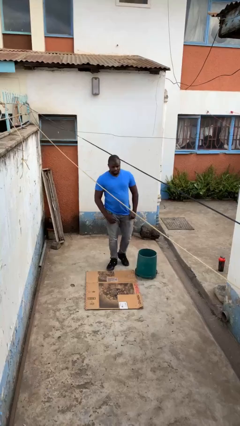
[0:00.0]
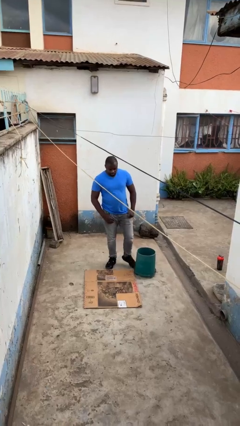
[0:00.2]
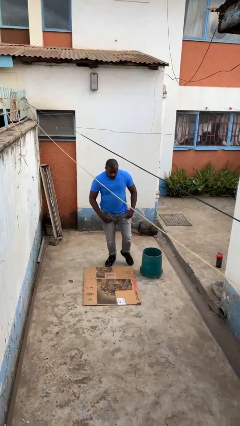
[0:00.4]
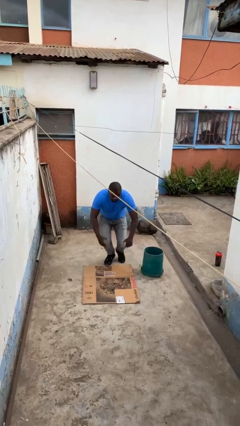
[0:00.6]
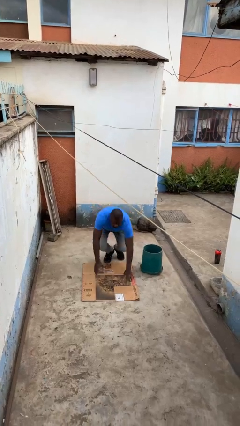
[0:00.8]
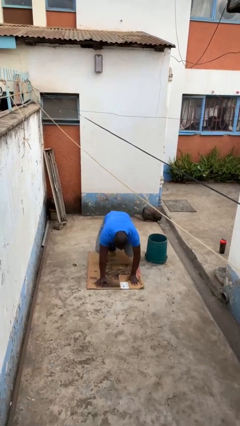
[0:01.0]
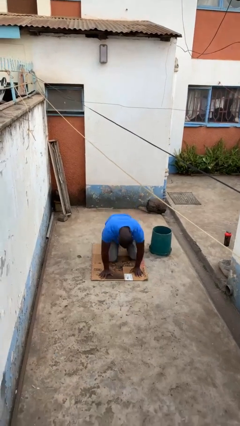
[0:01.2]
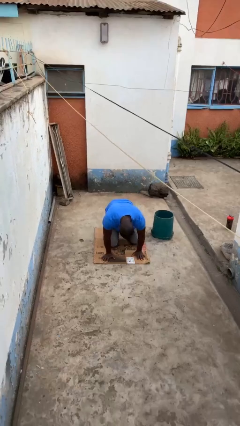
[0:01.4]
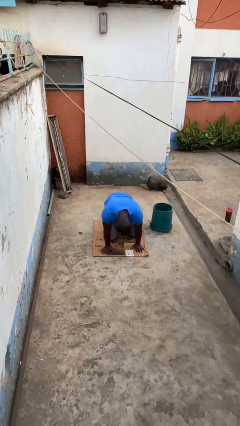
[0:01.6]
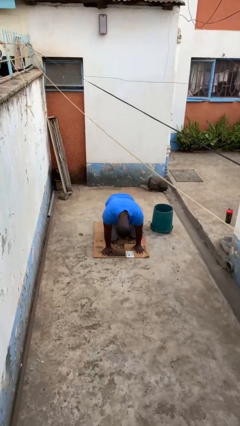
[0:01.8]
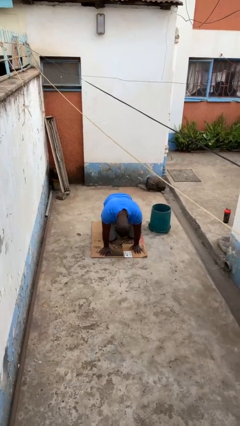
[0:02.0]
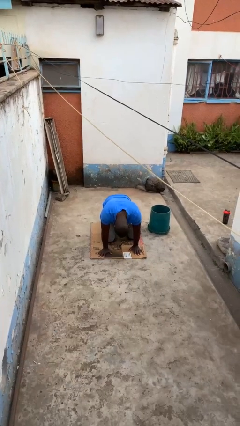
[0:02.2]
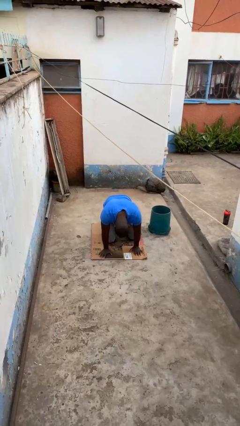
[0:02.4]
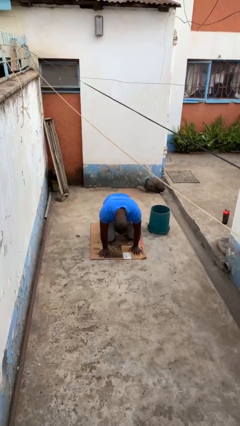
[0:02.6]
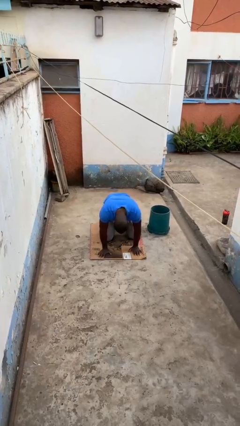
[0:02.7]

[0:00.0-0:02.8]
person trips on object on floor

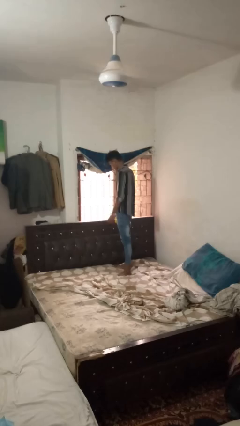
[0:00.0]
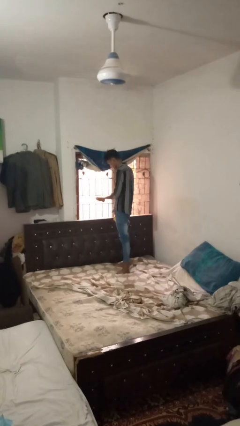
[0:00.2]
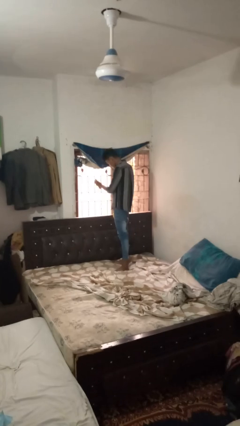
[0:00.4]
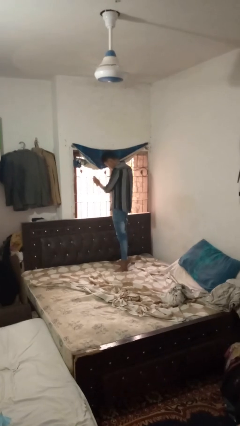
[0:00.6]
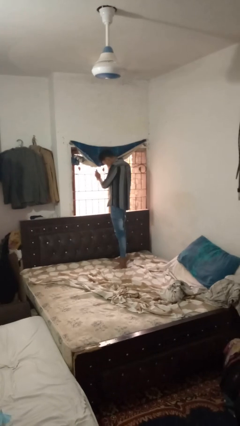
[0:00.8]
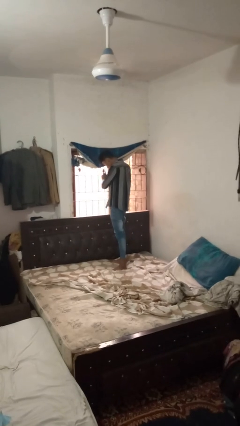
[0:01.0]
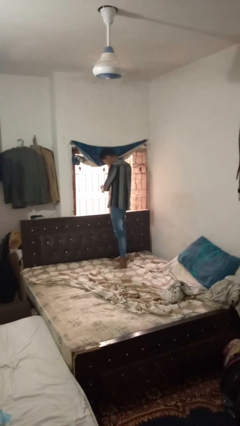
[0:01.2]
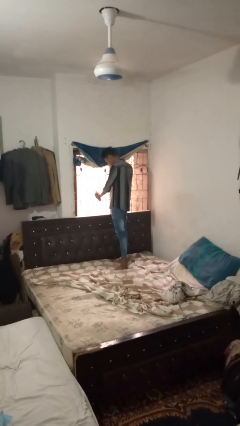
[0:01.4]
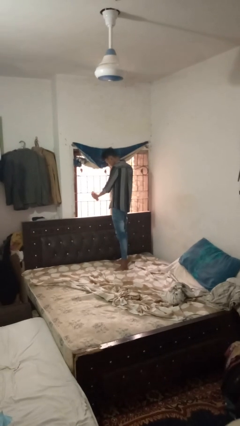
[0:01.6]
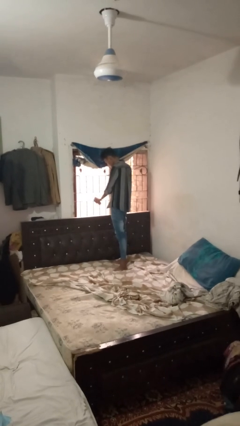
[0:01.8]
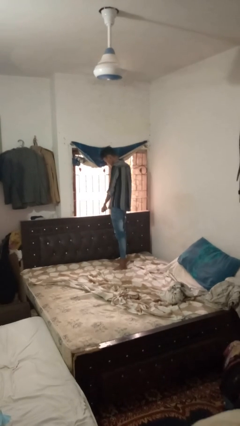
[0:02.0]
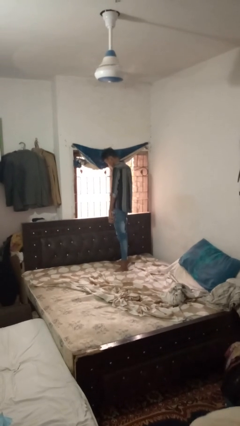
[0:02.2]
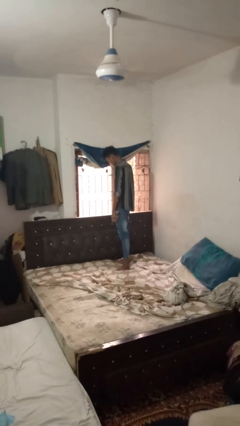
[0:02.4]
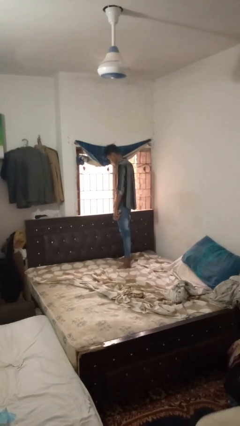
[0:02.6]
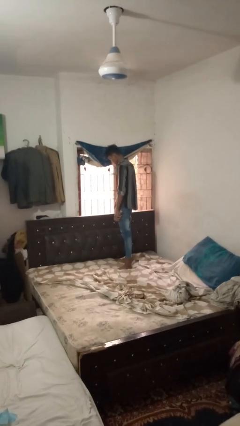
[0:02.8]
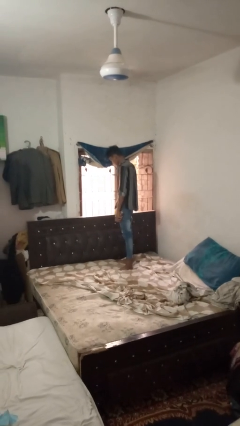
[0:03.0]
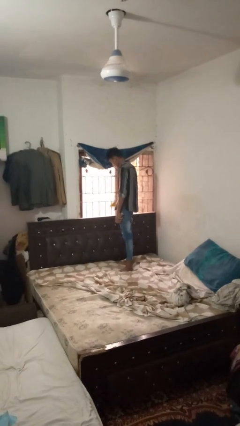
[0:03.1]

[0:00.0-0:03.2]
person sprays from bottle

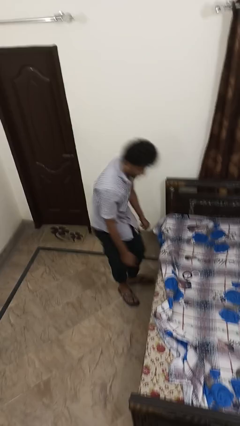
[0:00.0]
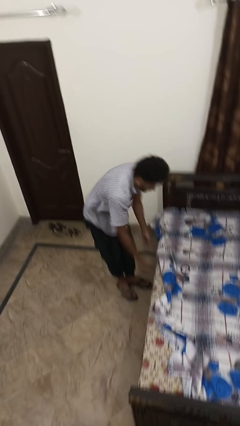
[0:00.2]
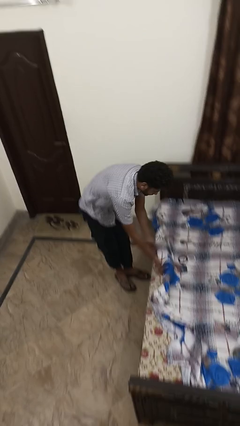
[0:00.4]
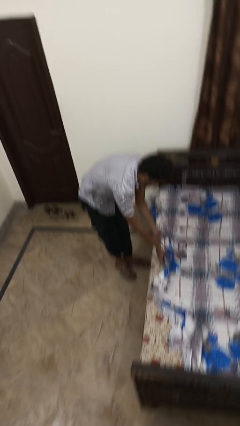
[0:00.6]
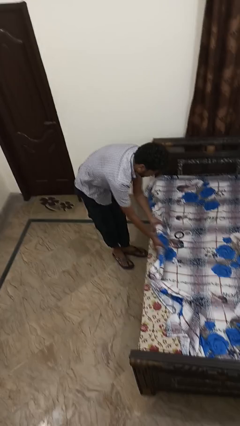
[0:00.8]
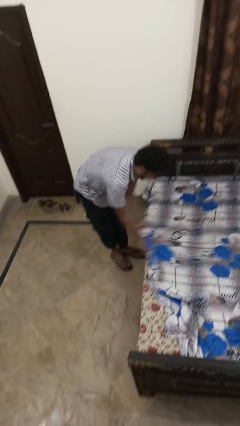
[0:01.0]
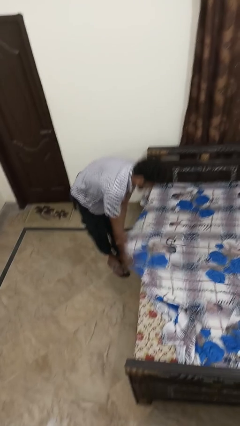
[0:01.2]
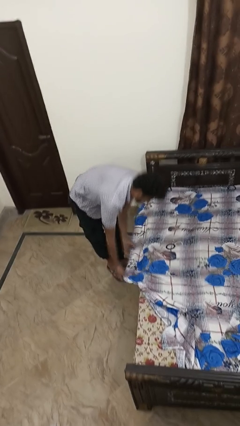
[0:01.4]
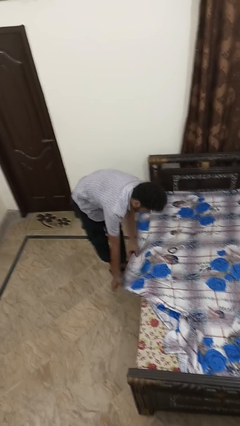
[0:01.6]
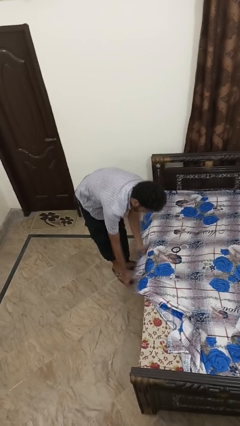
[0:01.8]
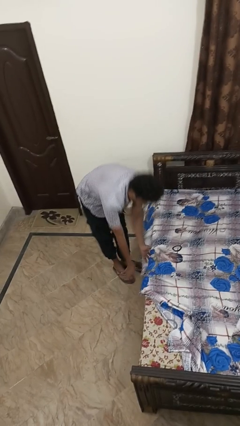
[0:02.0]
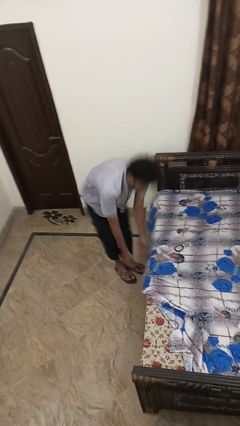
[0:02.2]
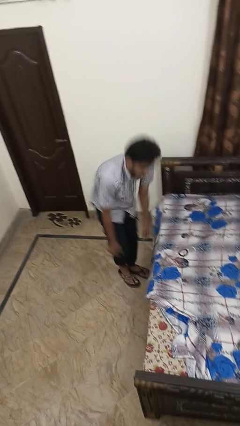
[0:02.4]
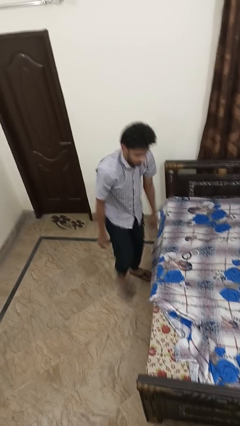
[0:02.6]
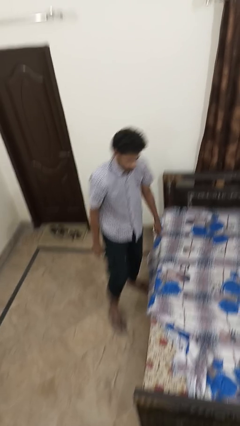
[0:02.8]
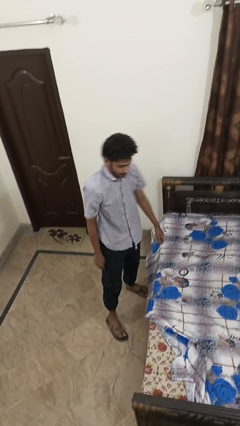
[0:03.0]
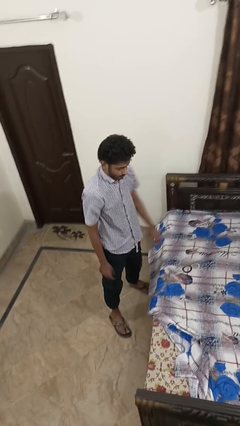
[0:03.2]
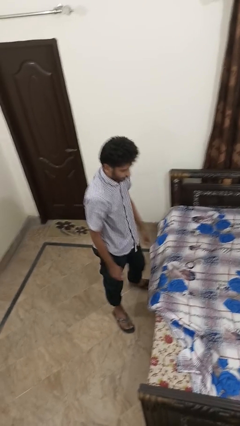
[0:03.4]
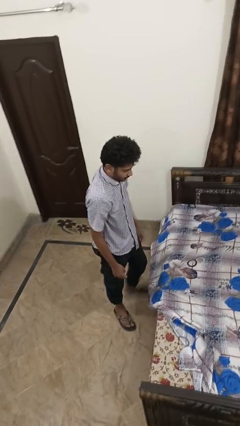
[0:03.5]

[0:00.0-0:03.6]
person makes bed

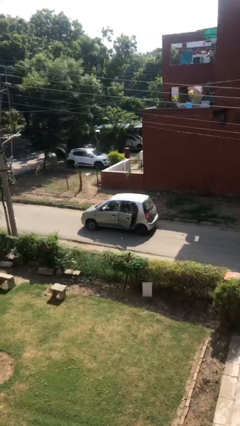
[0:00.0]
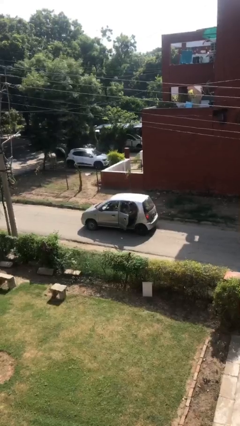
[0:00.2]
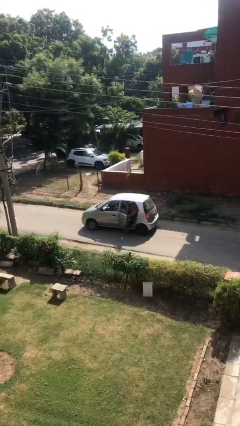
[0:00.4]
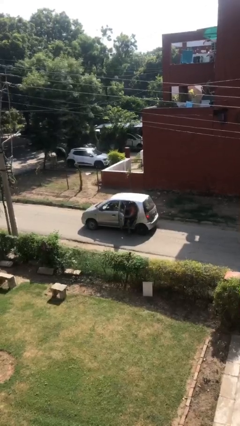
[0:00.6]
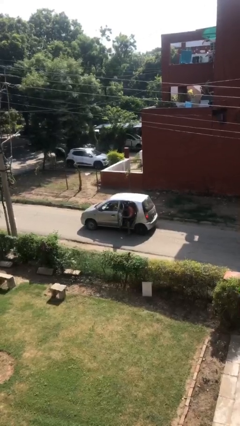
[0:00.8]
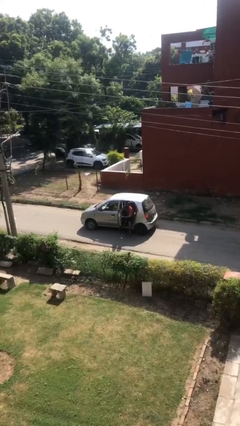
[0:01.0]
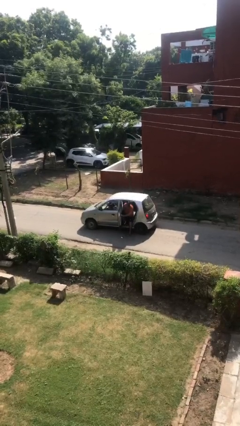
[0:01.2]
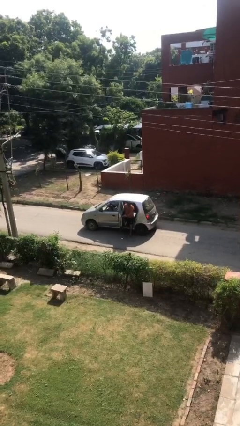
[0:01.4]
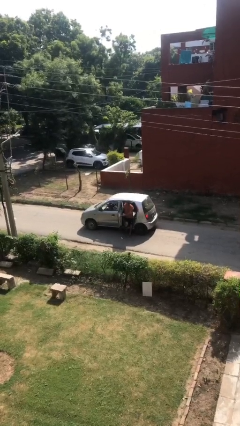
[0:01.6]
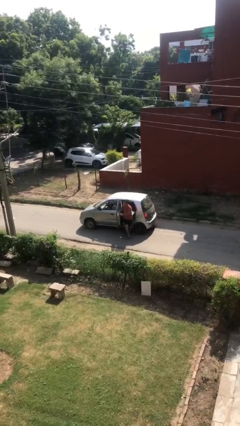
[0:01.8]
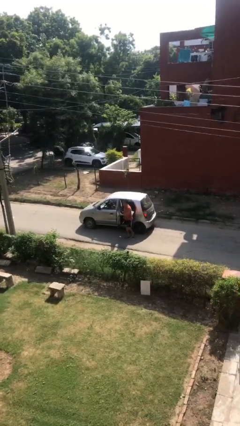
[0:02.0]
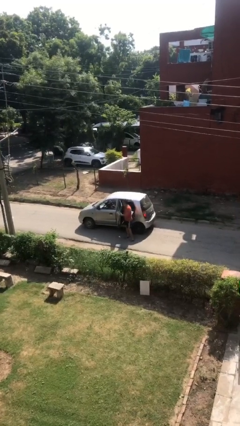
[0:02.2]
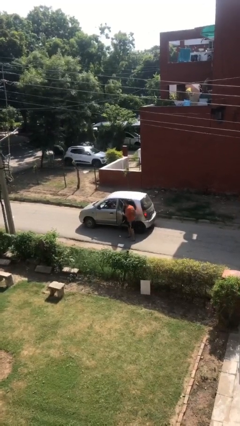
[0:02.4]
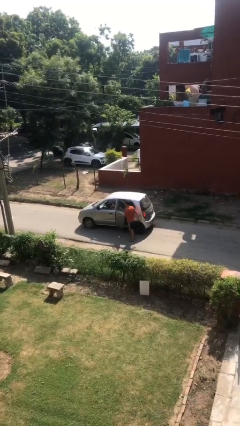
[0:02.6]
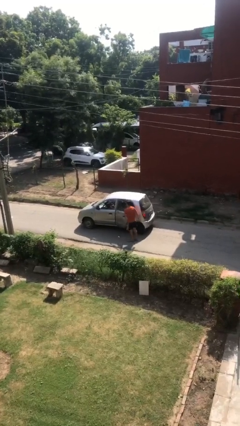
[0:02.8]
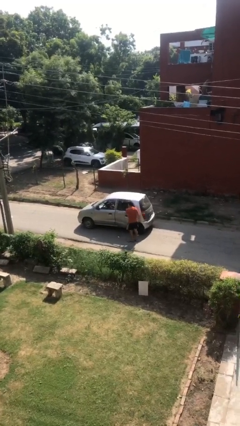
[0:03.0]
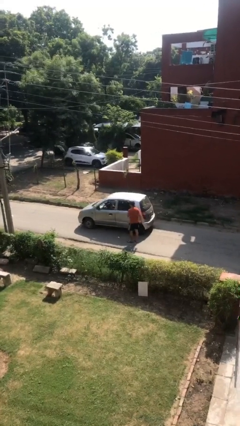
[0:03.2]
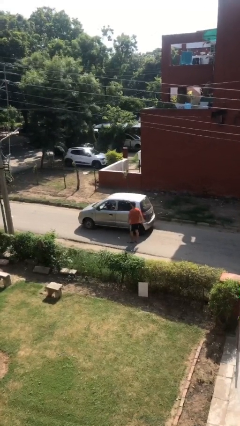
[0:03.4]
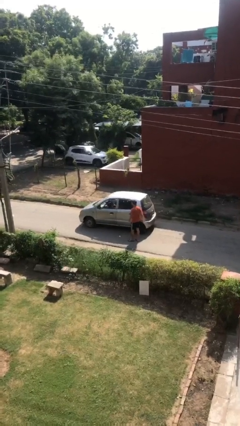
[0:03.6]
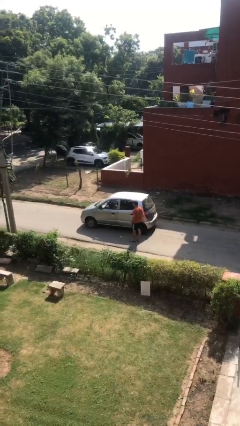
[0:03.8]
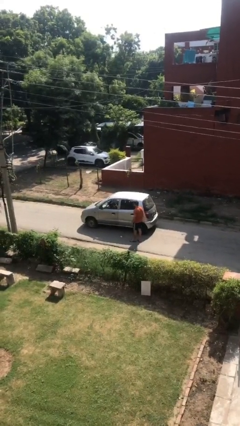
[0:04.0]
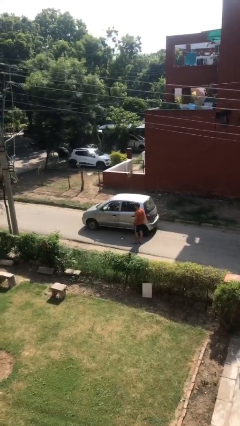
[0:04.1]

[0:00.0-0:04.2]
car drops off person

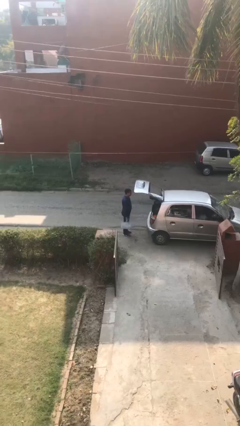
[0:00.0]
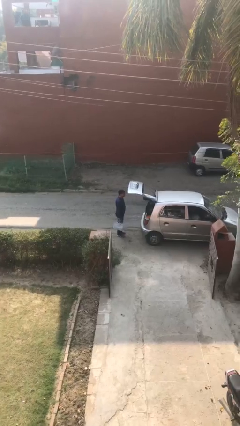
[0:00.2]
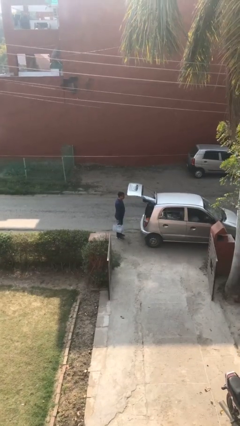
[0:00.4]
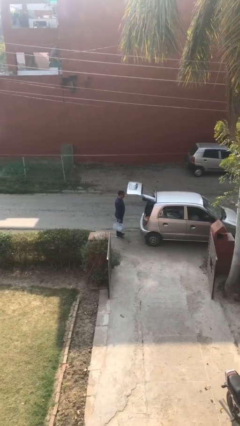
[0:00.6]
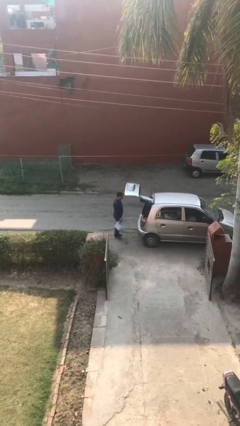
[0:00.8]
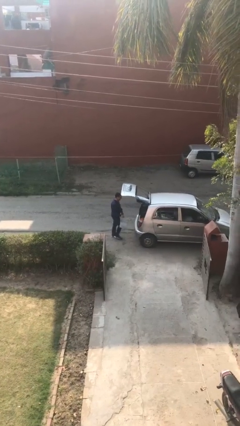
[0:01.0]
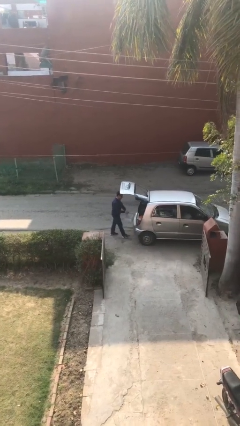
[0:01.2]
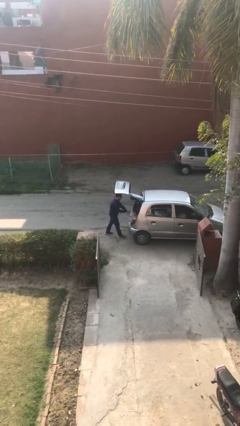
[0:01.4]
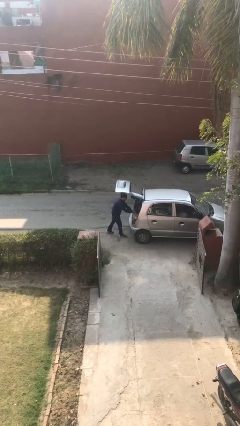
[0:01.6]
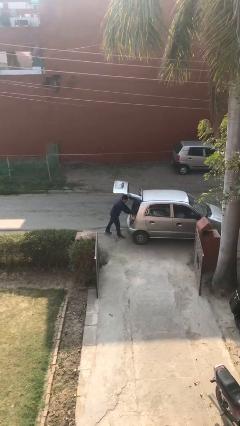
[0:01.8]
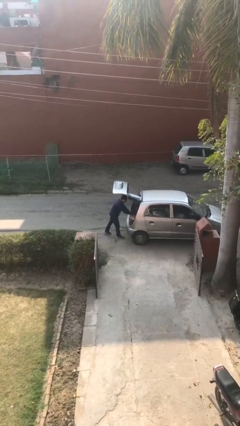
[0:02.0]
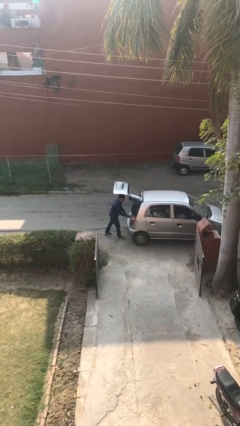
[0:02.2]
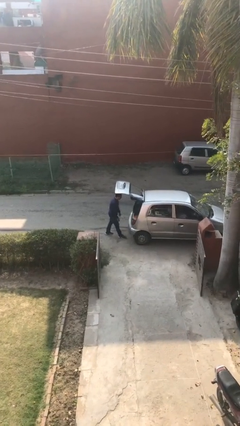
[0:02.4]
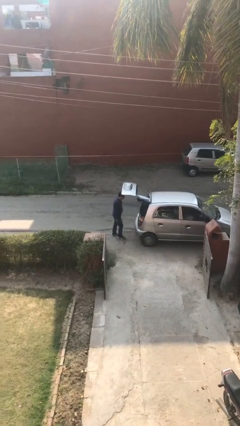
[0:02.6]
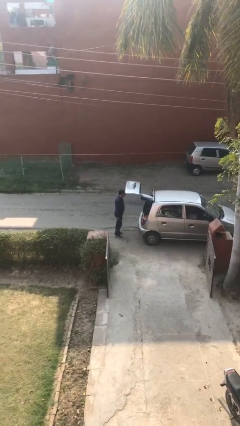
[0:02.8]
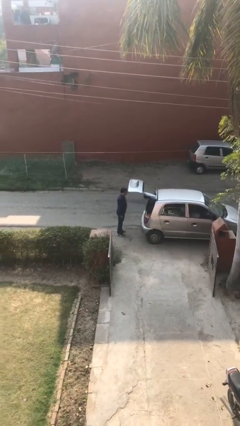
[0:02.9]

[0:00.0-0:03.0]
person loads car

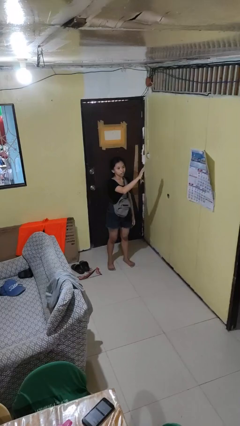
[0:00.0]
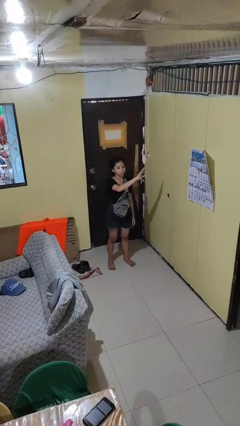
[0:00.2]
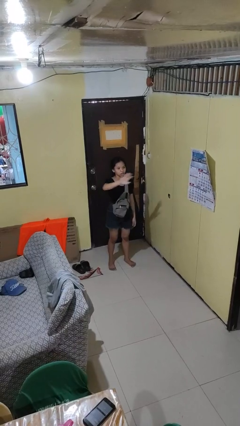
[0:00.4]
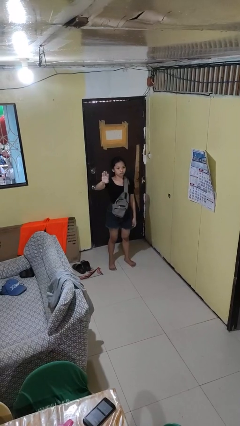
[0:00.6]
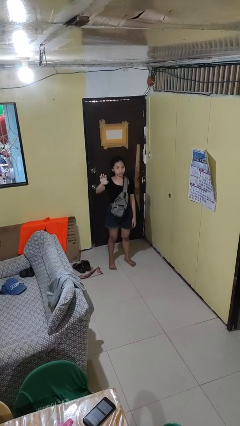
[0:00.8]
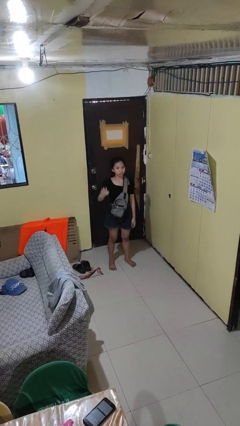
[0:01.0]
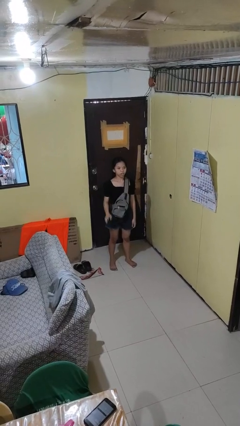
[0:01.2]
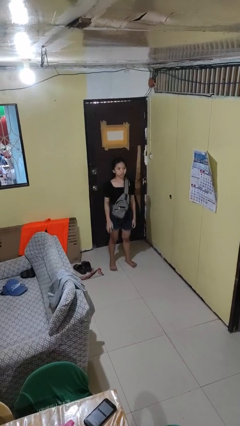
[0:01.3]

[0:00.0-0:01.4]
person gestures swipe right
